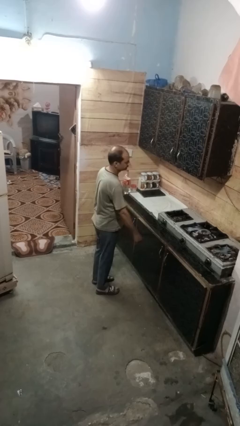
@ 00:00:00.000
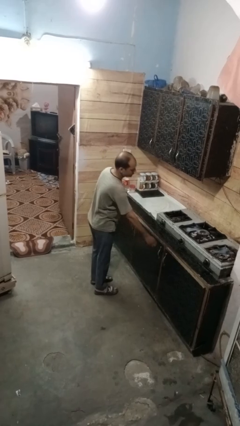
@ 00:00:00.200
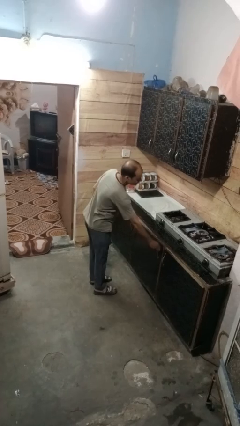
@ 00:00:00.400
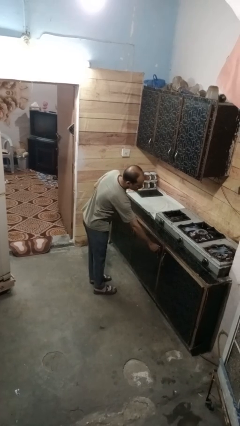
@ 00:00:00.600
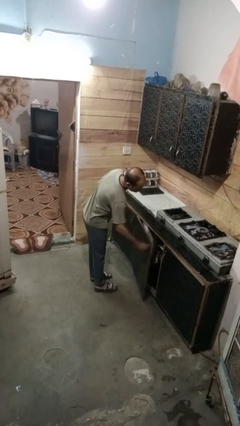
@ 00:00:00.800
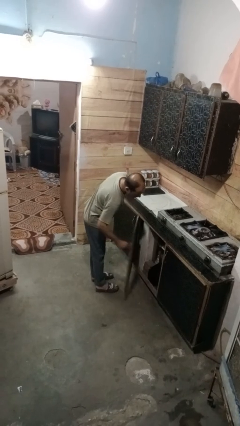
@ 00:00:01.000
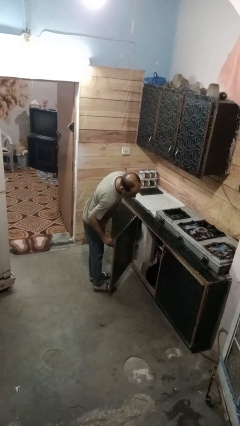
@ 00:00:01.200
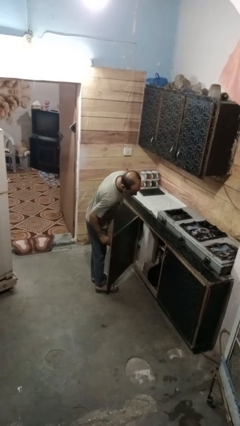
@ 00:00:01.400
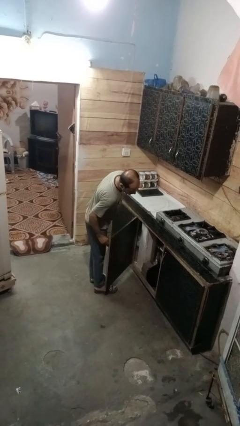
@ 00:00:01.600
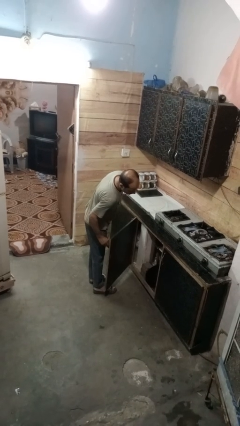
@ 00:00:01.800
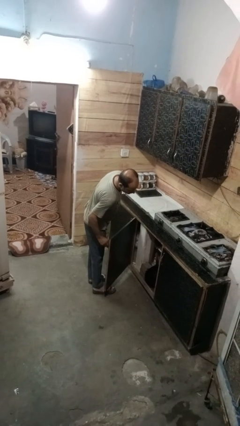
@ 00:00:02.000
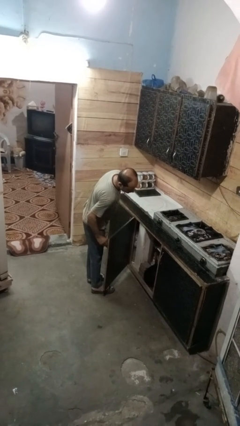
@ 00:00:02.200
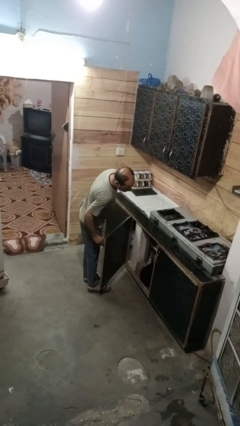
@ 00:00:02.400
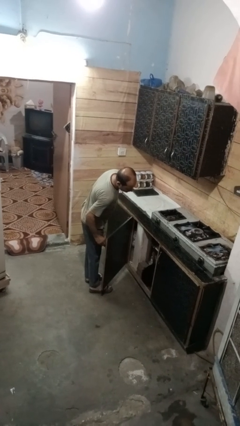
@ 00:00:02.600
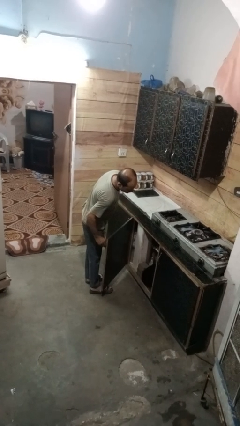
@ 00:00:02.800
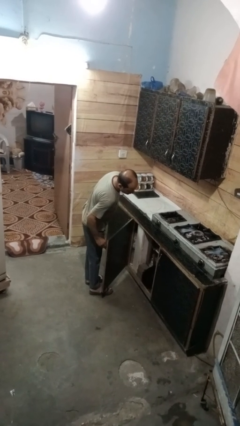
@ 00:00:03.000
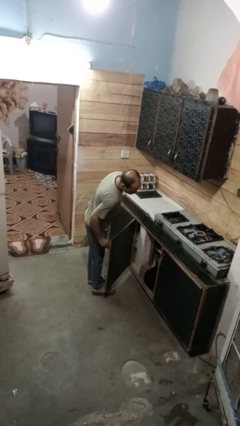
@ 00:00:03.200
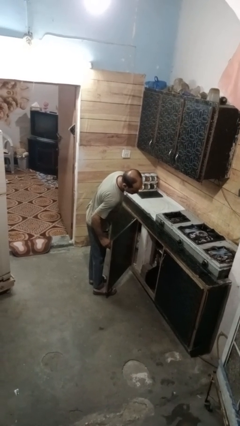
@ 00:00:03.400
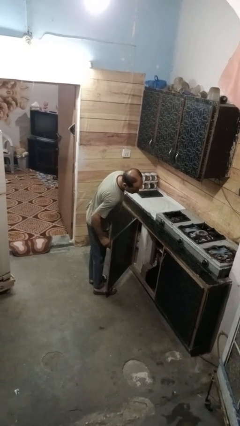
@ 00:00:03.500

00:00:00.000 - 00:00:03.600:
person opens cabinet

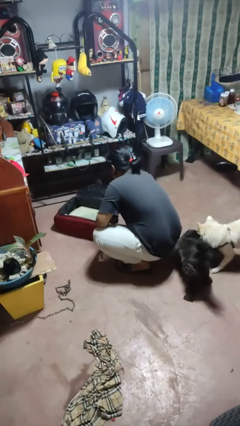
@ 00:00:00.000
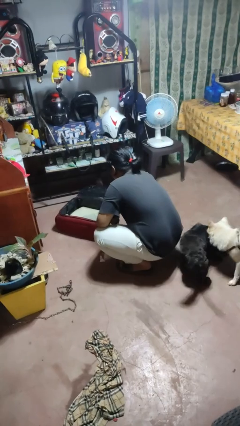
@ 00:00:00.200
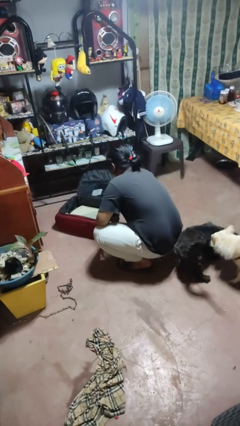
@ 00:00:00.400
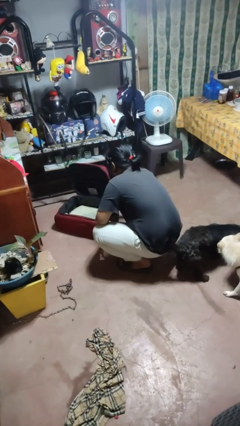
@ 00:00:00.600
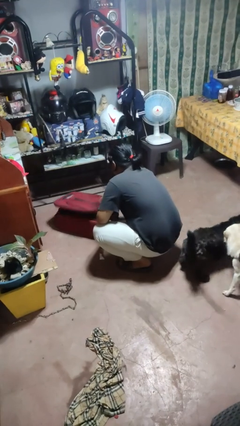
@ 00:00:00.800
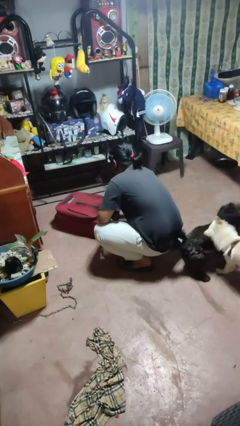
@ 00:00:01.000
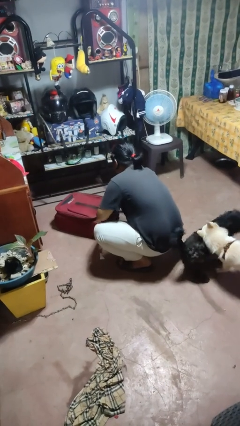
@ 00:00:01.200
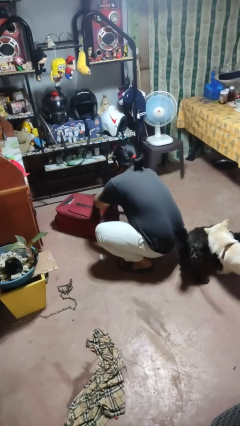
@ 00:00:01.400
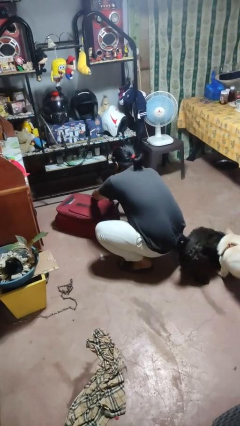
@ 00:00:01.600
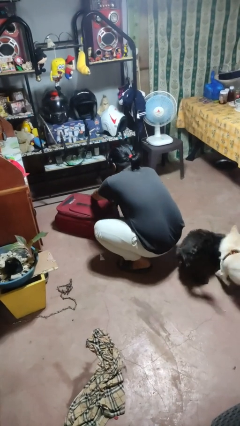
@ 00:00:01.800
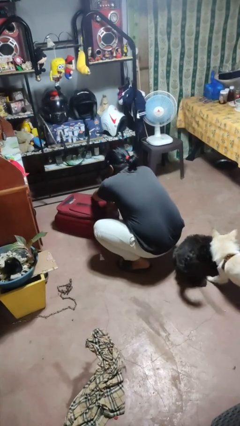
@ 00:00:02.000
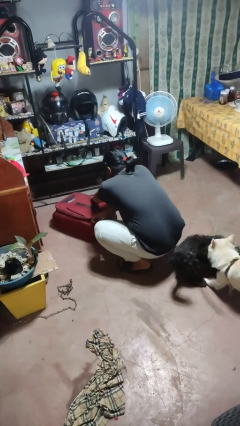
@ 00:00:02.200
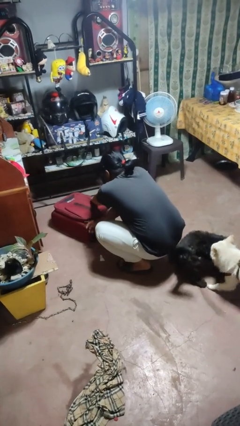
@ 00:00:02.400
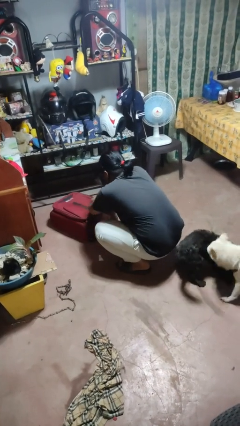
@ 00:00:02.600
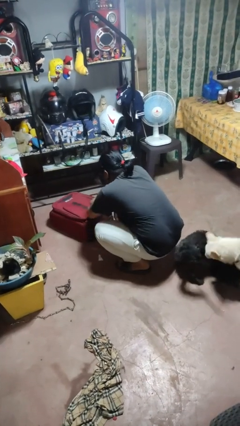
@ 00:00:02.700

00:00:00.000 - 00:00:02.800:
person closes suitcase

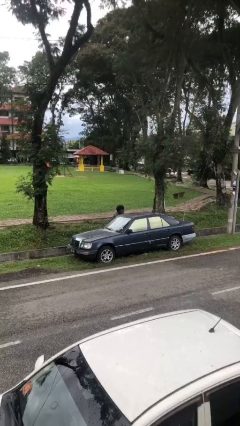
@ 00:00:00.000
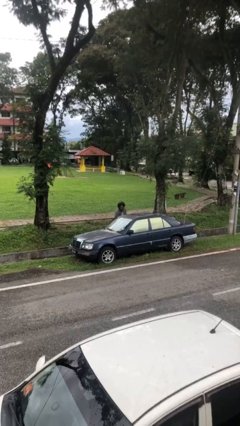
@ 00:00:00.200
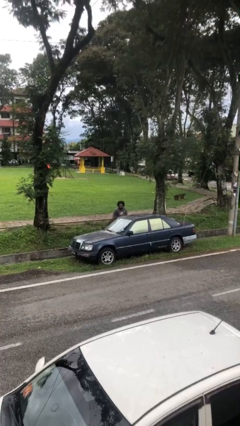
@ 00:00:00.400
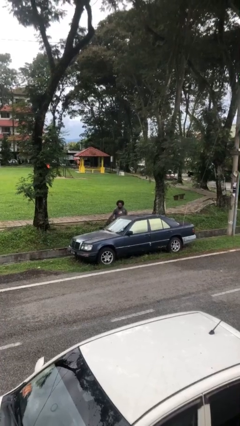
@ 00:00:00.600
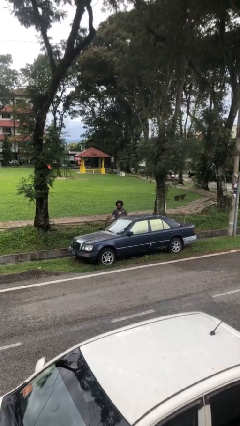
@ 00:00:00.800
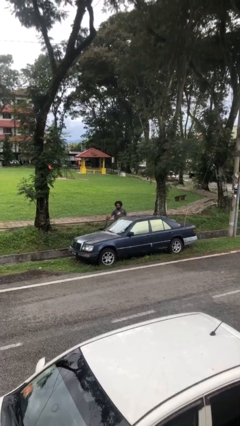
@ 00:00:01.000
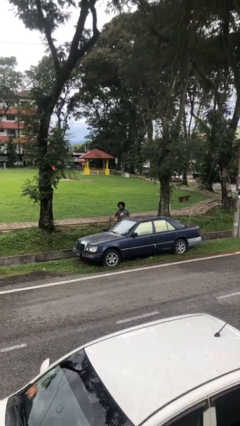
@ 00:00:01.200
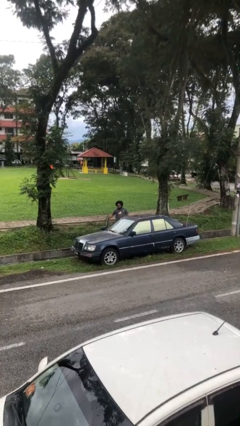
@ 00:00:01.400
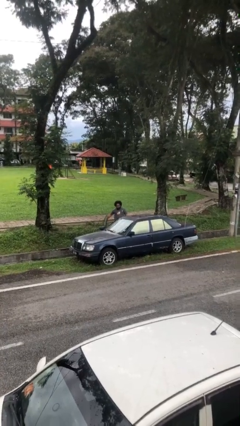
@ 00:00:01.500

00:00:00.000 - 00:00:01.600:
person opens car door

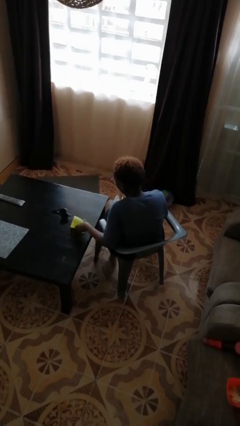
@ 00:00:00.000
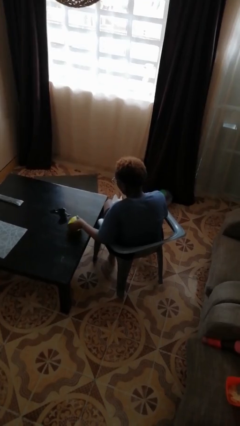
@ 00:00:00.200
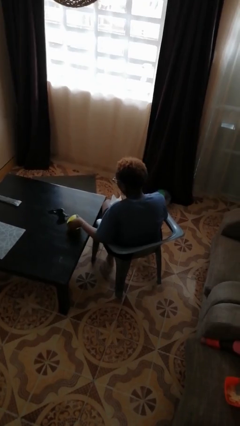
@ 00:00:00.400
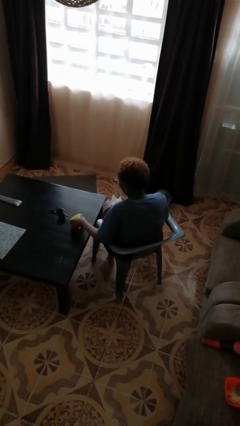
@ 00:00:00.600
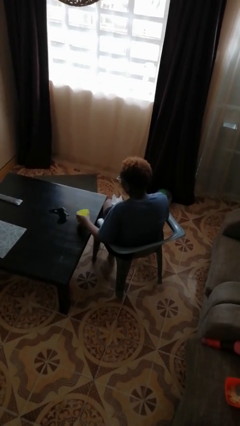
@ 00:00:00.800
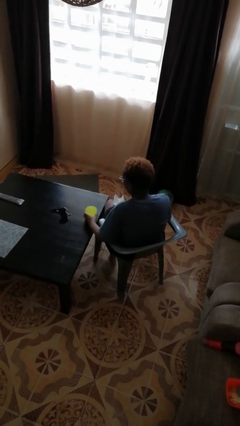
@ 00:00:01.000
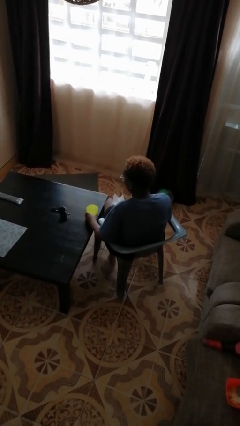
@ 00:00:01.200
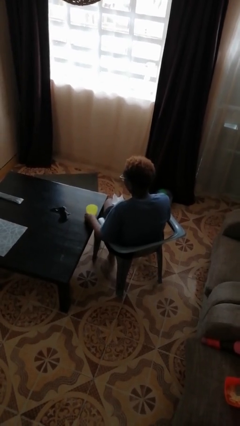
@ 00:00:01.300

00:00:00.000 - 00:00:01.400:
person sets upright glass

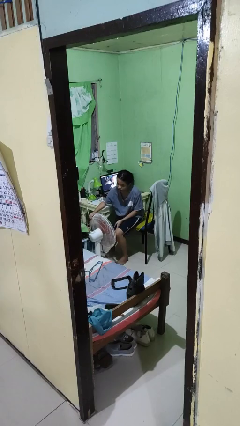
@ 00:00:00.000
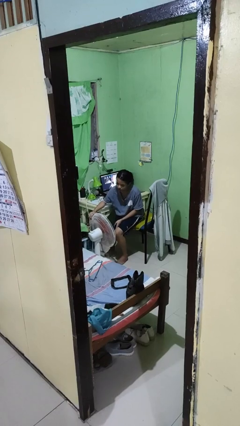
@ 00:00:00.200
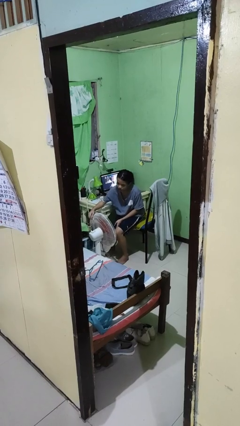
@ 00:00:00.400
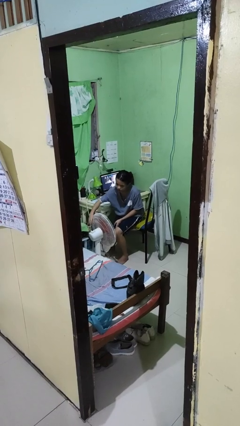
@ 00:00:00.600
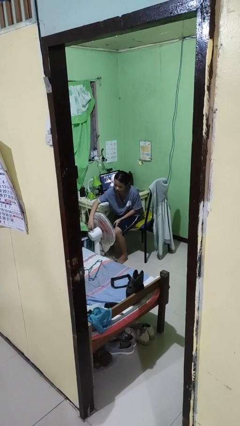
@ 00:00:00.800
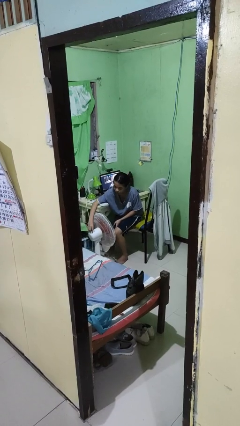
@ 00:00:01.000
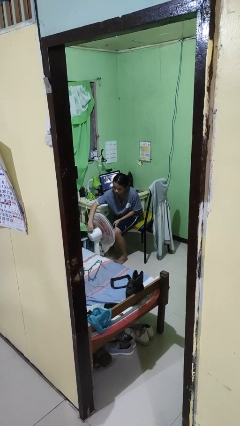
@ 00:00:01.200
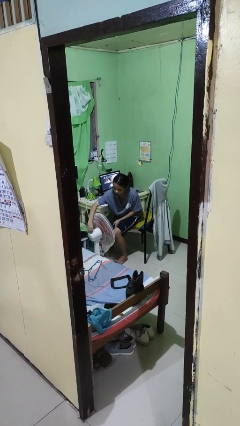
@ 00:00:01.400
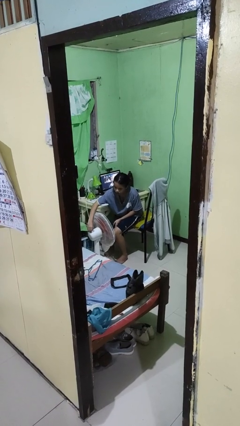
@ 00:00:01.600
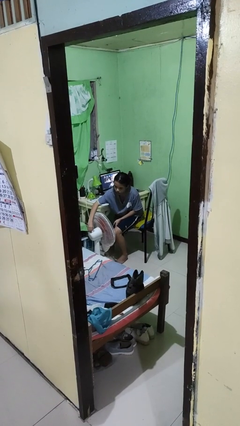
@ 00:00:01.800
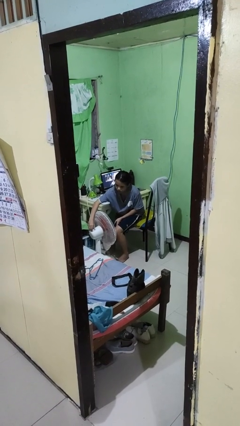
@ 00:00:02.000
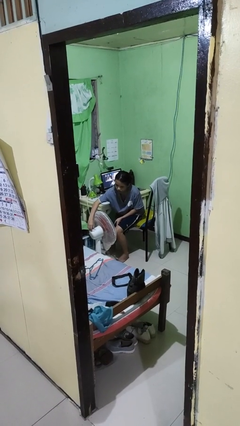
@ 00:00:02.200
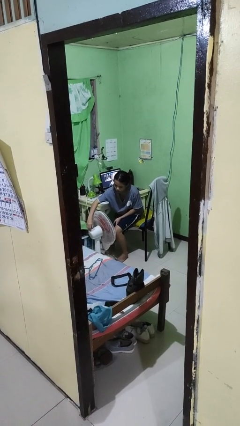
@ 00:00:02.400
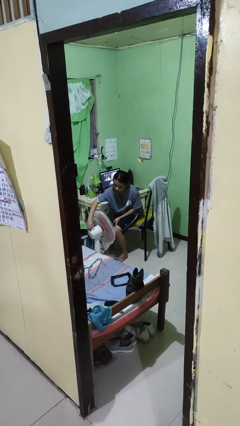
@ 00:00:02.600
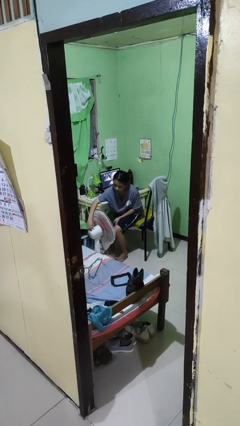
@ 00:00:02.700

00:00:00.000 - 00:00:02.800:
person turns on fan

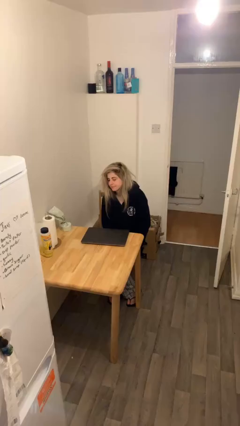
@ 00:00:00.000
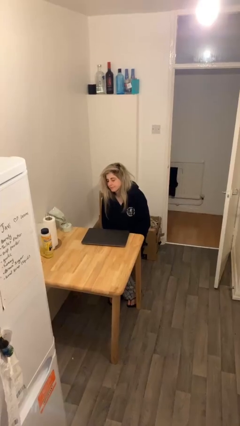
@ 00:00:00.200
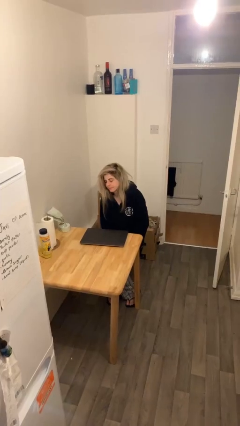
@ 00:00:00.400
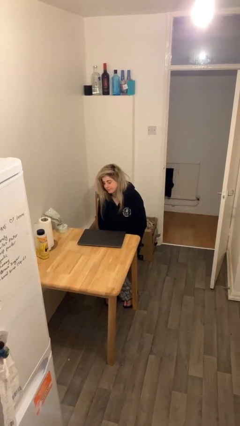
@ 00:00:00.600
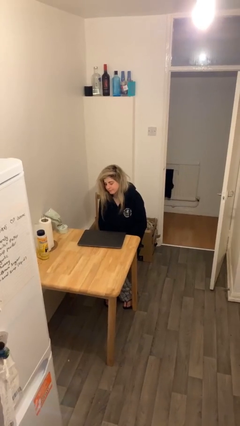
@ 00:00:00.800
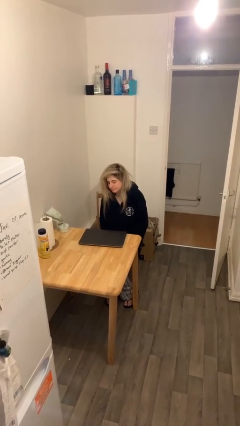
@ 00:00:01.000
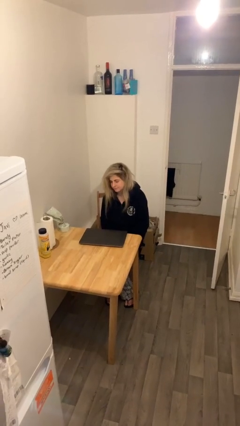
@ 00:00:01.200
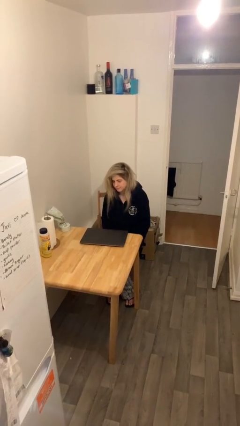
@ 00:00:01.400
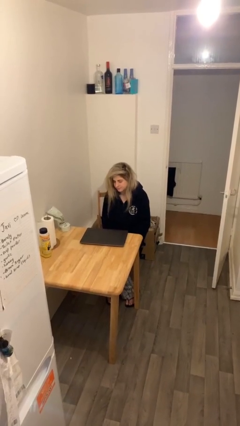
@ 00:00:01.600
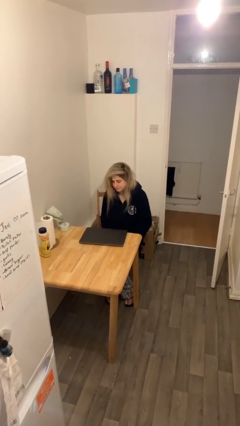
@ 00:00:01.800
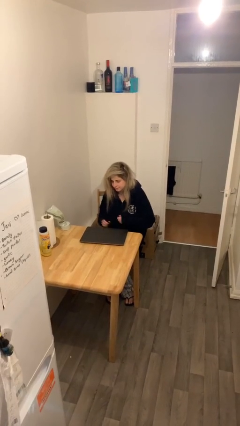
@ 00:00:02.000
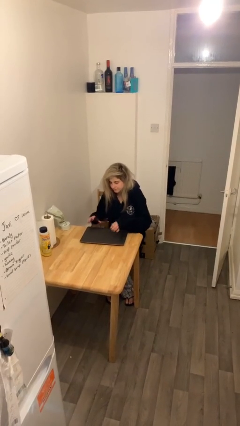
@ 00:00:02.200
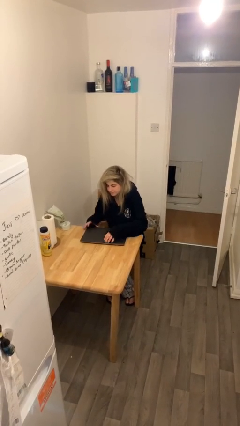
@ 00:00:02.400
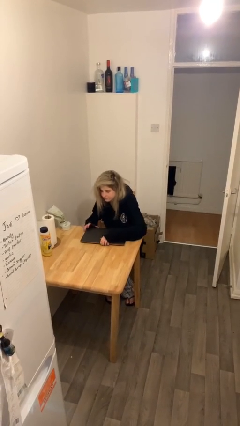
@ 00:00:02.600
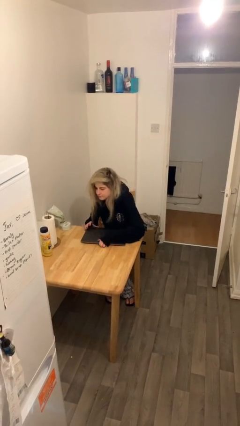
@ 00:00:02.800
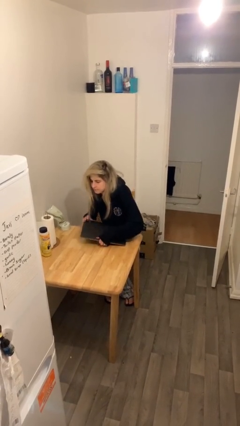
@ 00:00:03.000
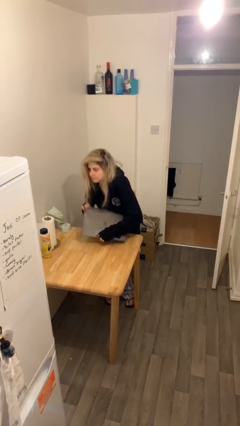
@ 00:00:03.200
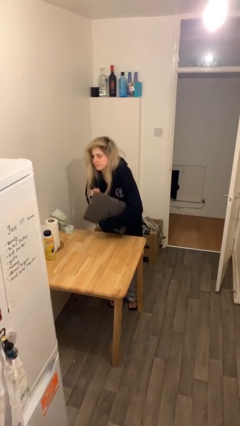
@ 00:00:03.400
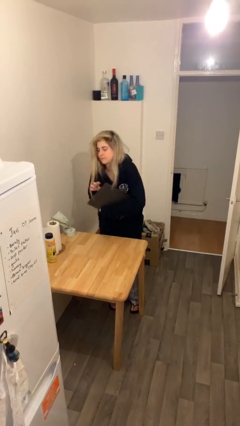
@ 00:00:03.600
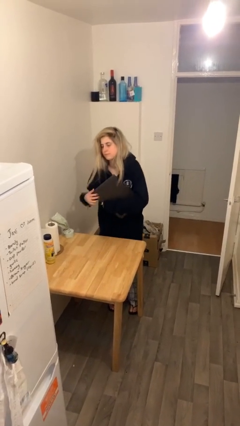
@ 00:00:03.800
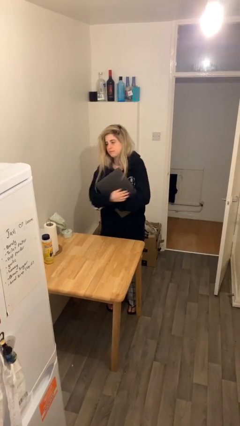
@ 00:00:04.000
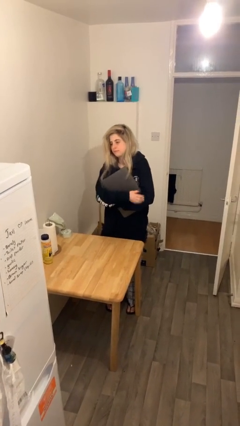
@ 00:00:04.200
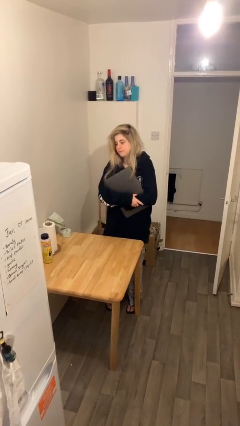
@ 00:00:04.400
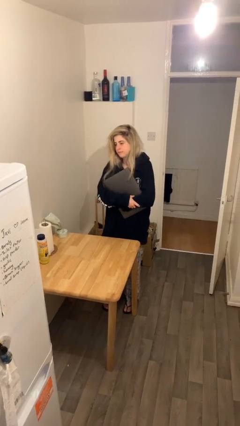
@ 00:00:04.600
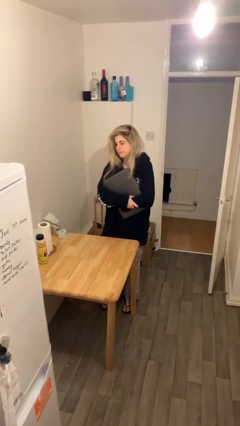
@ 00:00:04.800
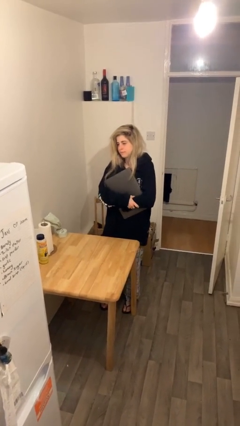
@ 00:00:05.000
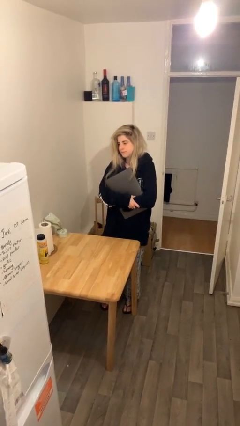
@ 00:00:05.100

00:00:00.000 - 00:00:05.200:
person stands up
